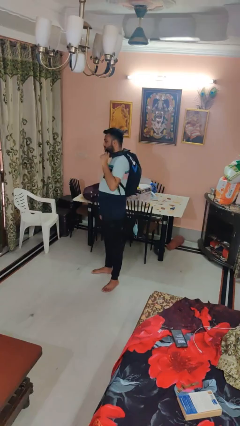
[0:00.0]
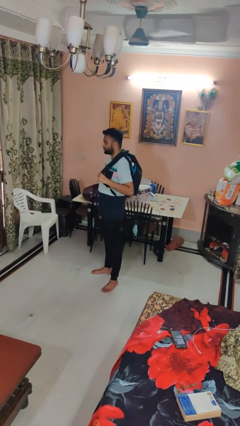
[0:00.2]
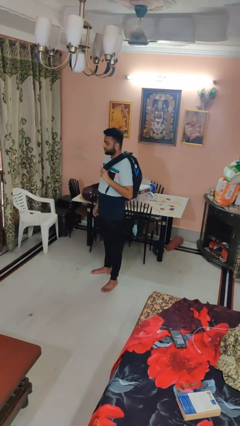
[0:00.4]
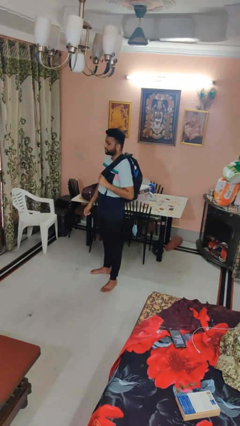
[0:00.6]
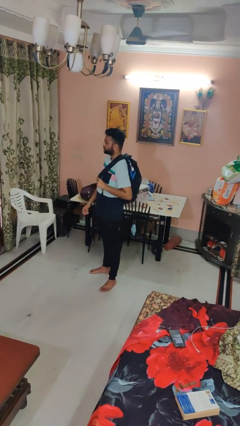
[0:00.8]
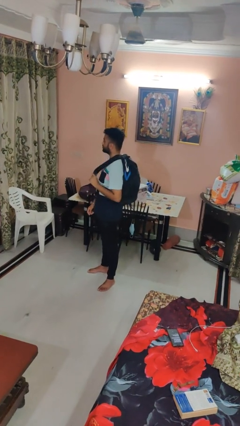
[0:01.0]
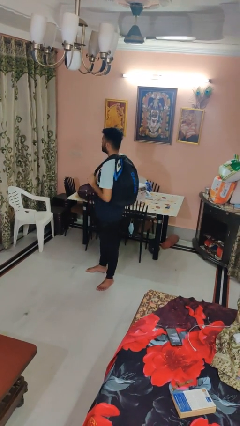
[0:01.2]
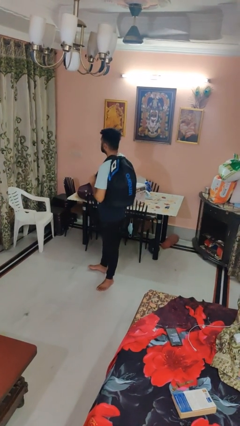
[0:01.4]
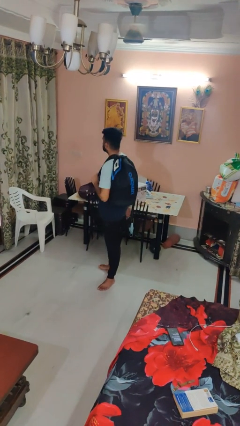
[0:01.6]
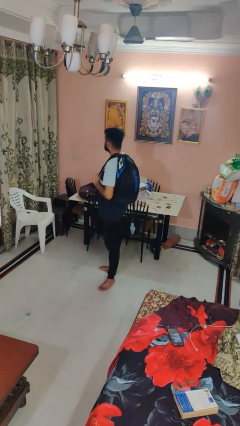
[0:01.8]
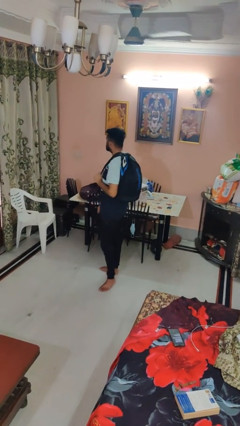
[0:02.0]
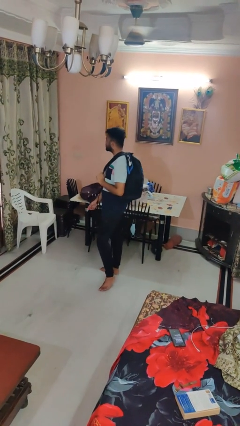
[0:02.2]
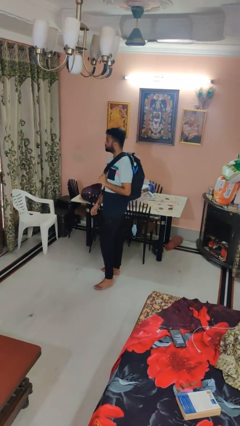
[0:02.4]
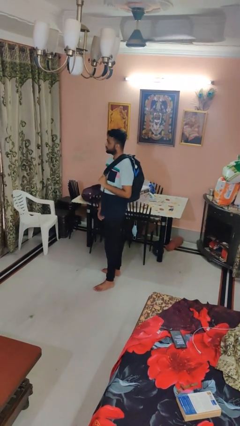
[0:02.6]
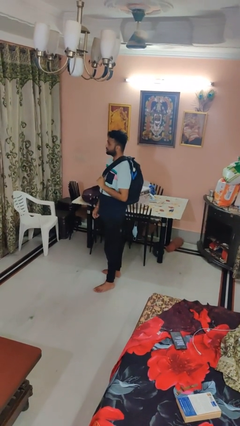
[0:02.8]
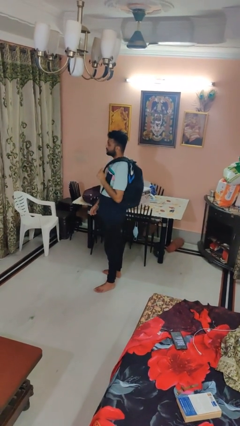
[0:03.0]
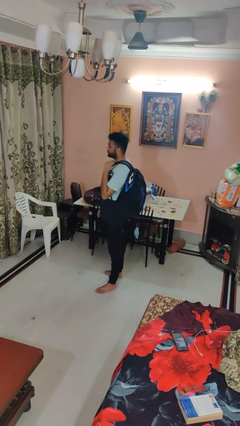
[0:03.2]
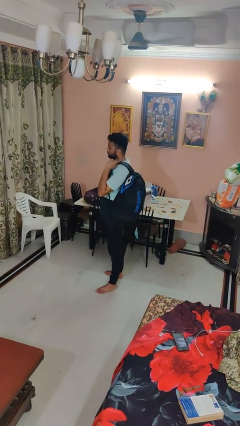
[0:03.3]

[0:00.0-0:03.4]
person puts on backpack

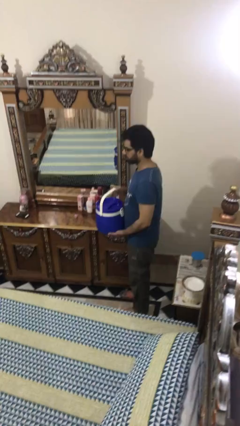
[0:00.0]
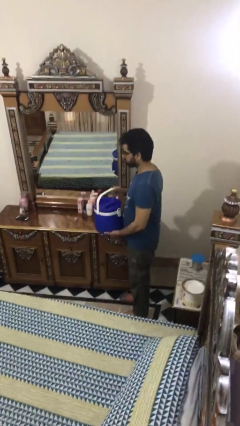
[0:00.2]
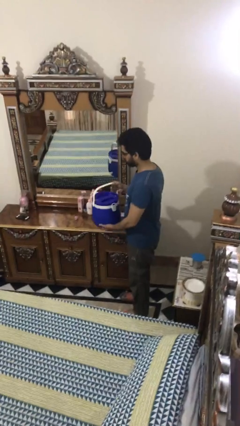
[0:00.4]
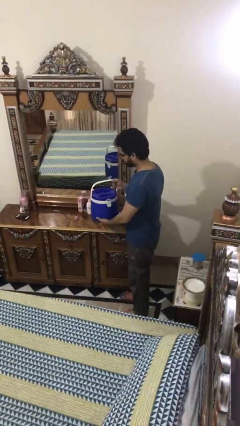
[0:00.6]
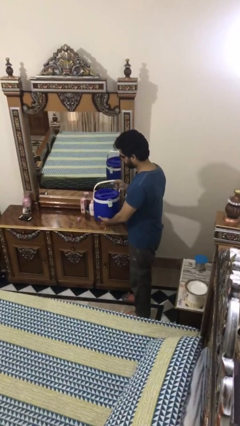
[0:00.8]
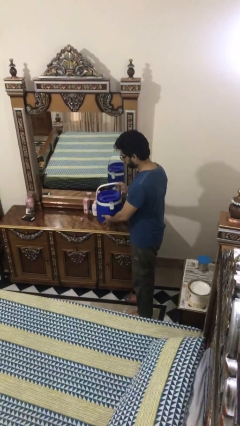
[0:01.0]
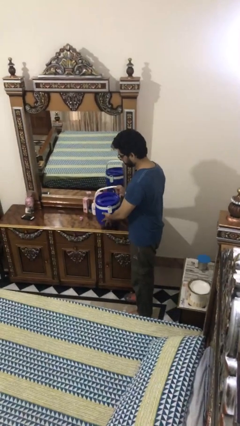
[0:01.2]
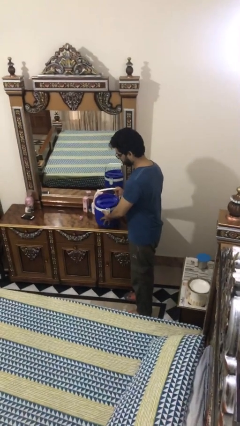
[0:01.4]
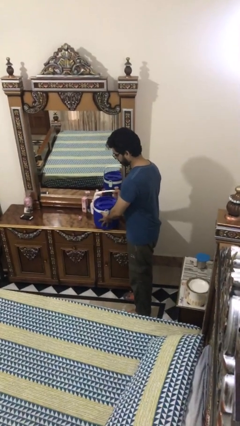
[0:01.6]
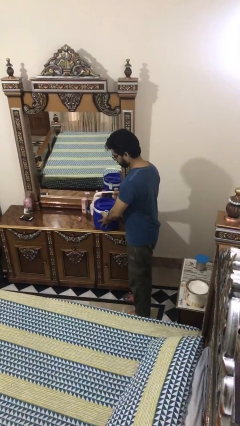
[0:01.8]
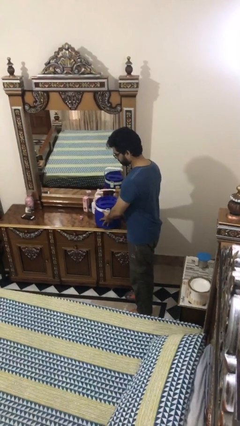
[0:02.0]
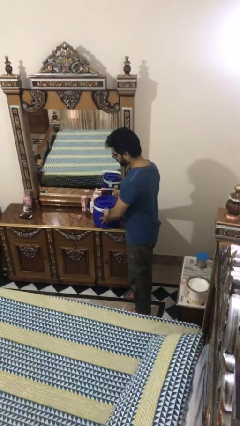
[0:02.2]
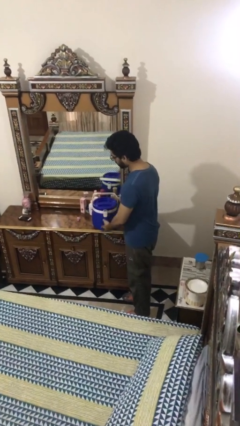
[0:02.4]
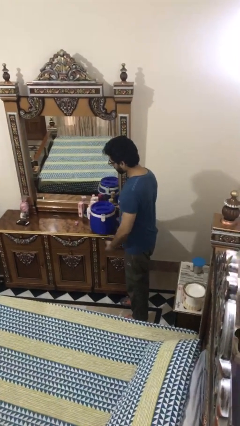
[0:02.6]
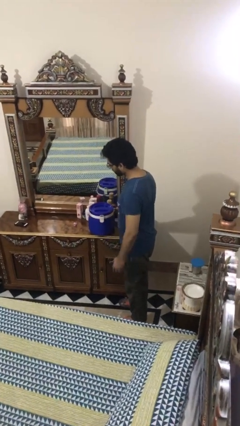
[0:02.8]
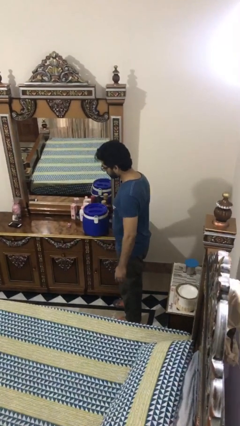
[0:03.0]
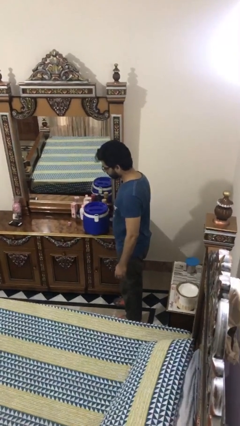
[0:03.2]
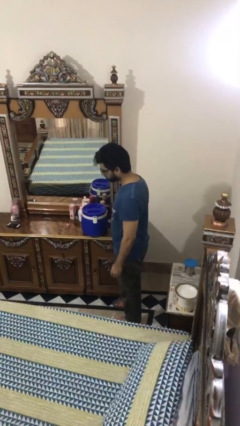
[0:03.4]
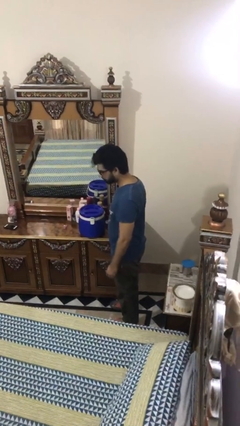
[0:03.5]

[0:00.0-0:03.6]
person puts down object on table

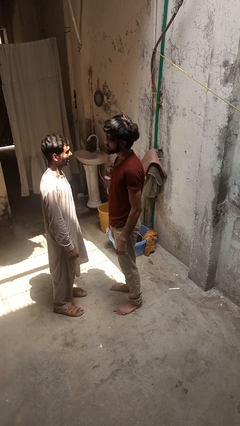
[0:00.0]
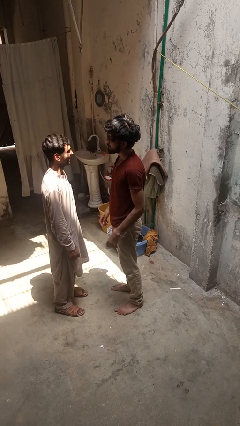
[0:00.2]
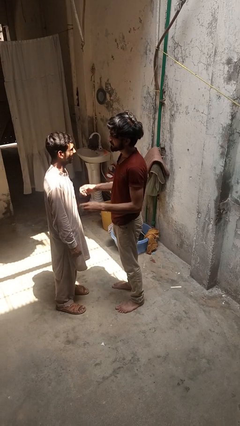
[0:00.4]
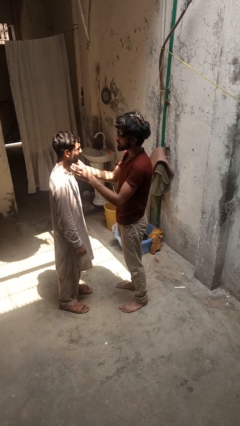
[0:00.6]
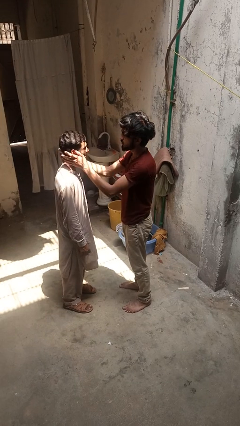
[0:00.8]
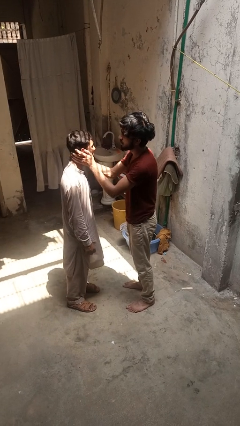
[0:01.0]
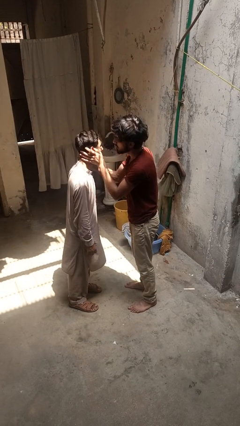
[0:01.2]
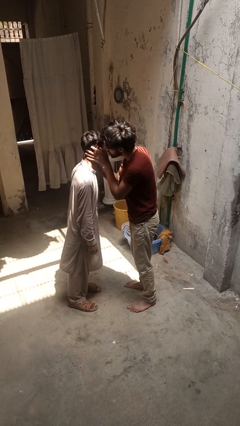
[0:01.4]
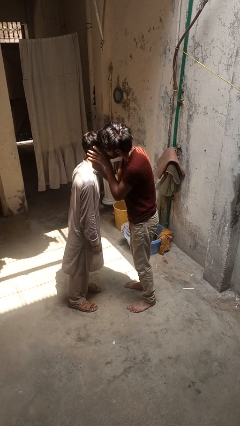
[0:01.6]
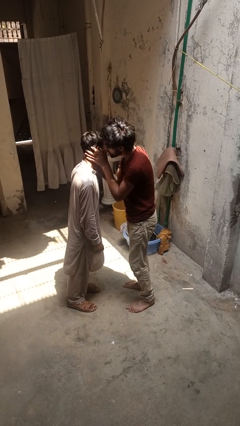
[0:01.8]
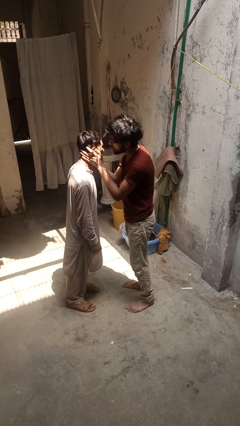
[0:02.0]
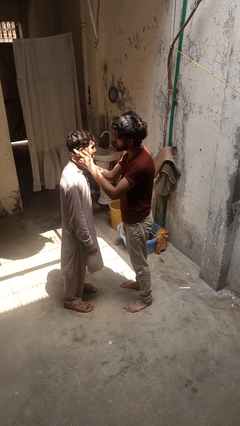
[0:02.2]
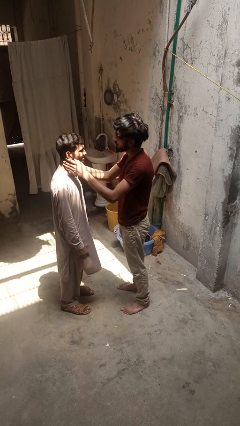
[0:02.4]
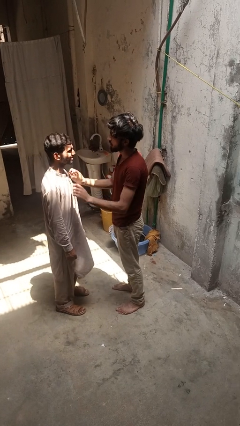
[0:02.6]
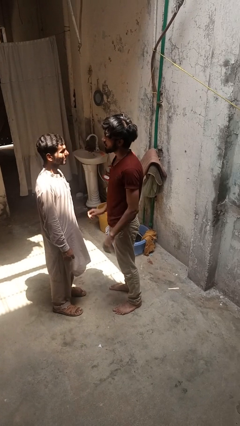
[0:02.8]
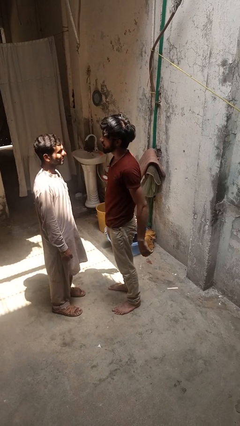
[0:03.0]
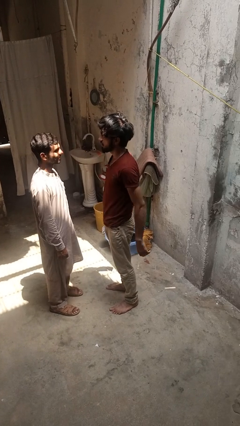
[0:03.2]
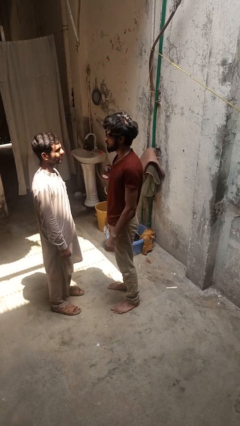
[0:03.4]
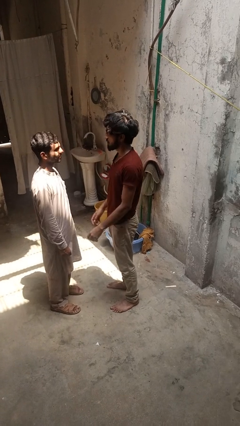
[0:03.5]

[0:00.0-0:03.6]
person kisses cheek of person

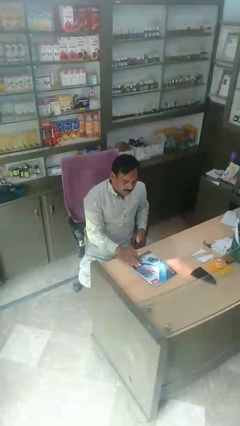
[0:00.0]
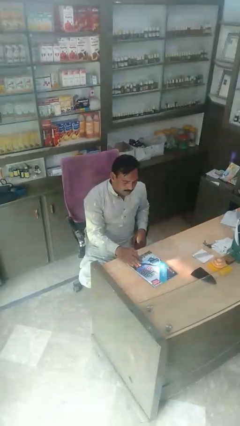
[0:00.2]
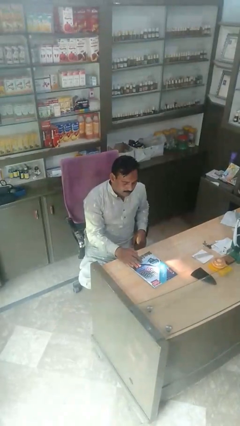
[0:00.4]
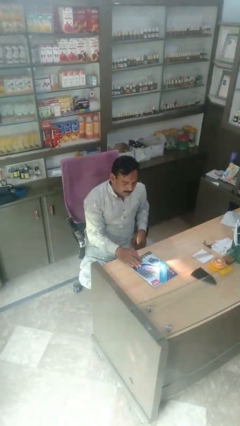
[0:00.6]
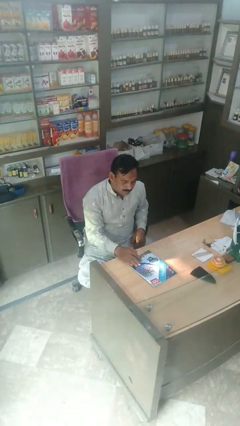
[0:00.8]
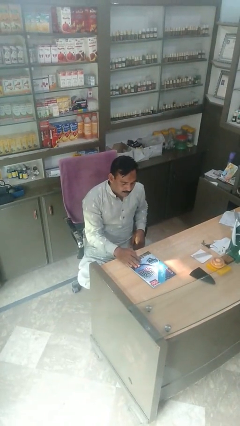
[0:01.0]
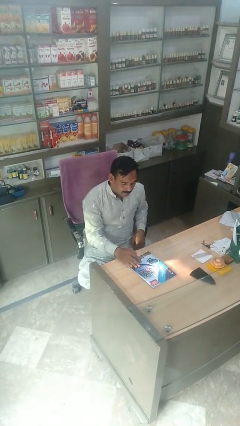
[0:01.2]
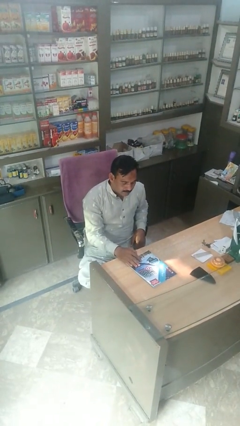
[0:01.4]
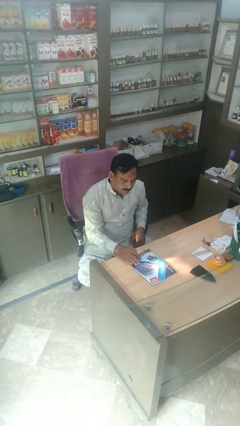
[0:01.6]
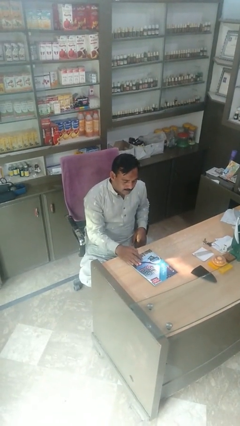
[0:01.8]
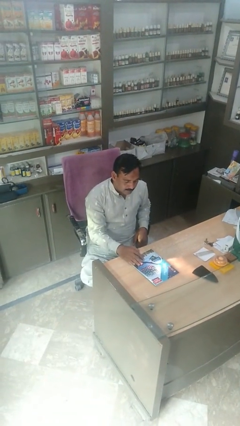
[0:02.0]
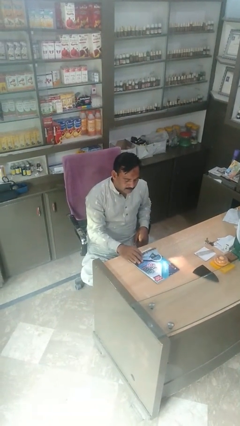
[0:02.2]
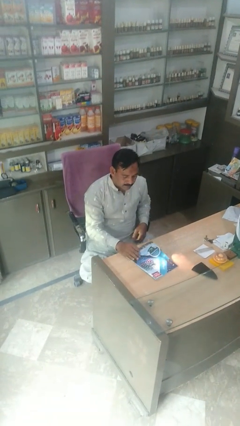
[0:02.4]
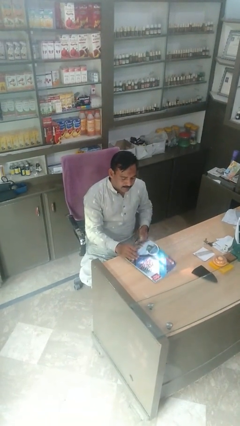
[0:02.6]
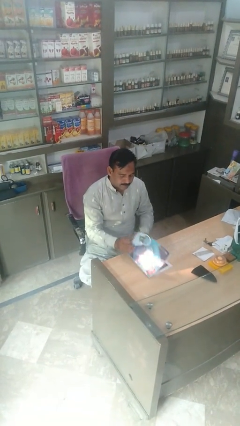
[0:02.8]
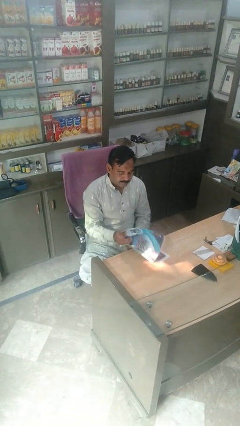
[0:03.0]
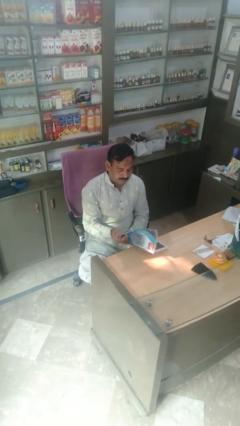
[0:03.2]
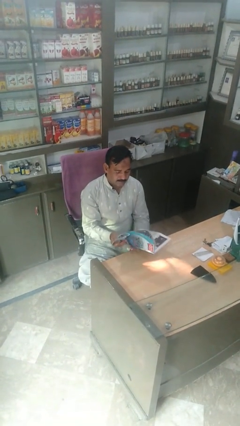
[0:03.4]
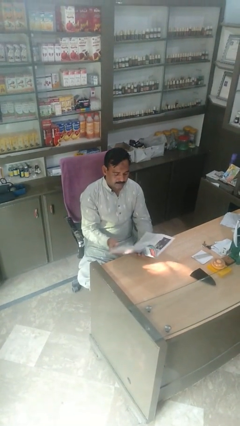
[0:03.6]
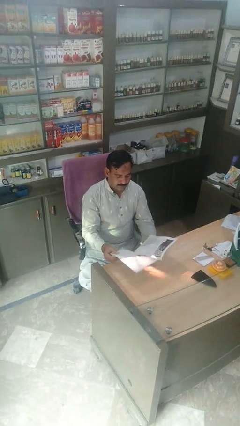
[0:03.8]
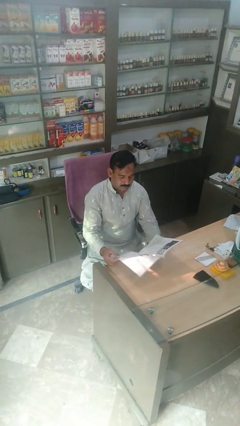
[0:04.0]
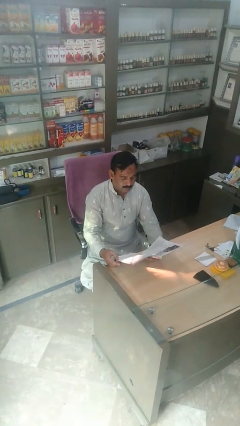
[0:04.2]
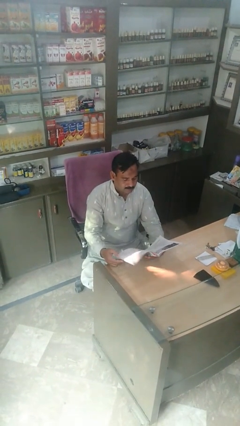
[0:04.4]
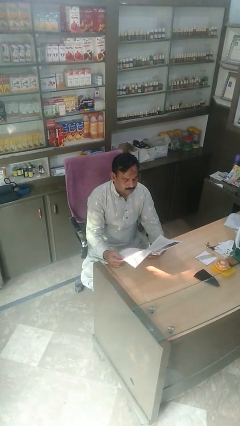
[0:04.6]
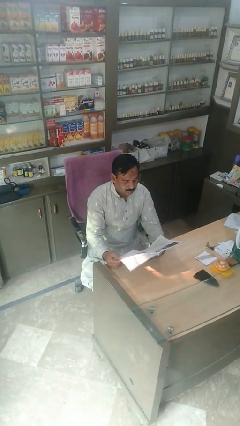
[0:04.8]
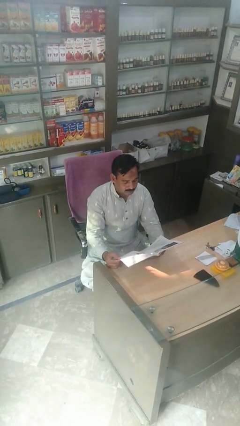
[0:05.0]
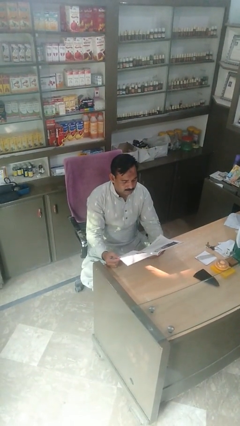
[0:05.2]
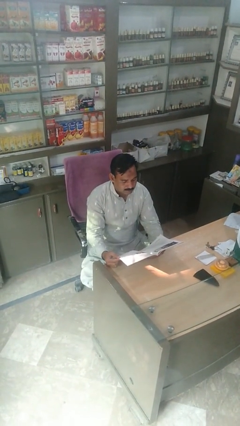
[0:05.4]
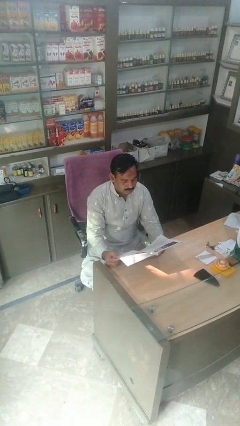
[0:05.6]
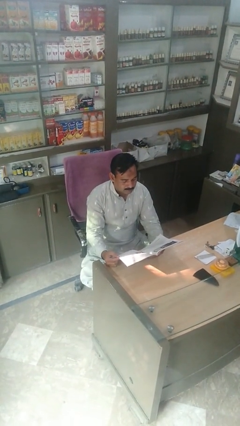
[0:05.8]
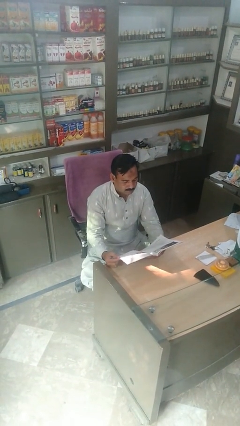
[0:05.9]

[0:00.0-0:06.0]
person reads magazine

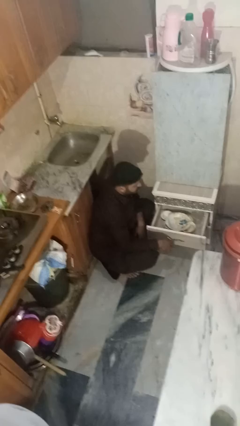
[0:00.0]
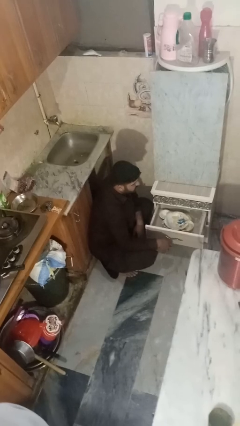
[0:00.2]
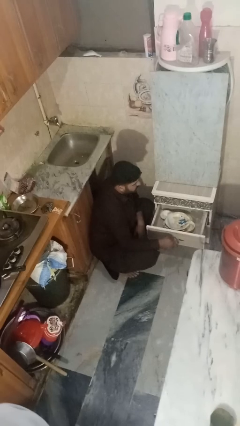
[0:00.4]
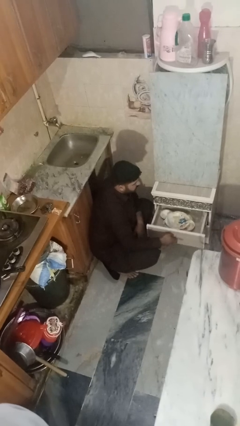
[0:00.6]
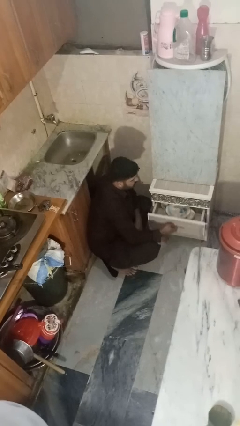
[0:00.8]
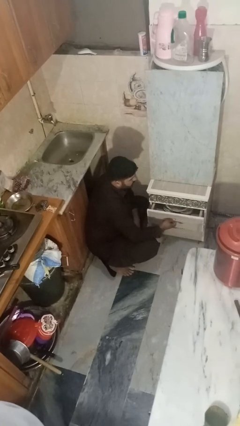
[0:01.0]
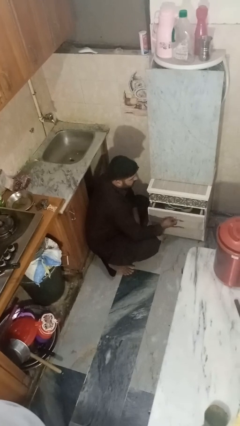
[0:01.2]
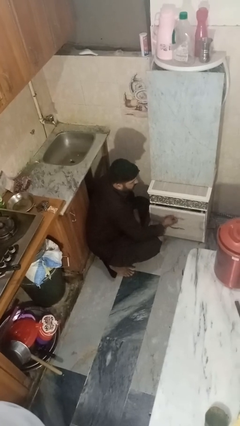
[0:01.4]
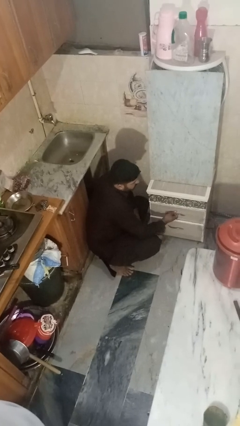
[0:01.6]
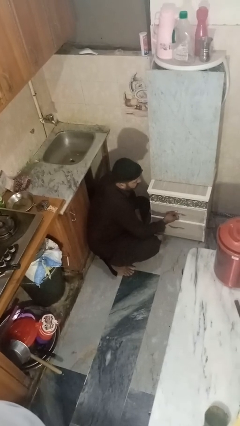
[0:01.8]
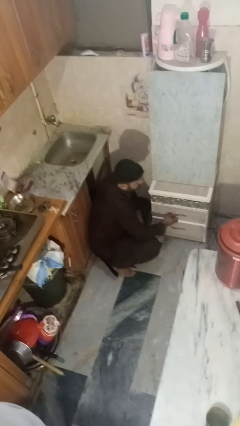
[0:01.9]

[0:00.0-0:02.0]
person closes kitchen drawer
